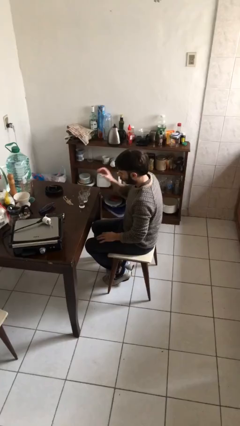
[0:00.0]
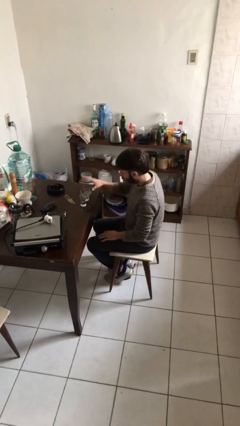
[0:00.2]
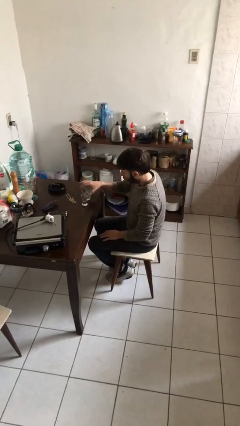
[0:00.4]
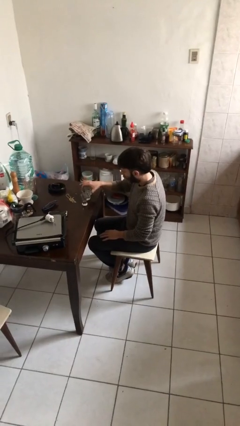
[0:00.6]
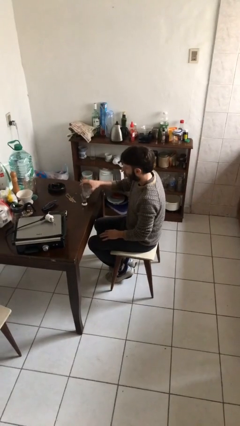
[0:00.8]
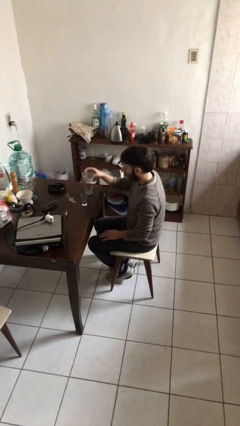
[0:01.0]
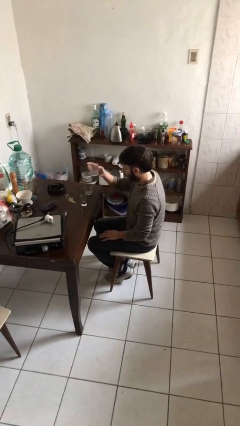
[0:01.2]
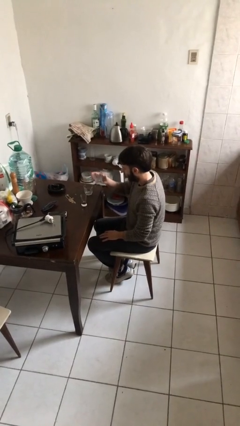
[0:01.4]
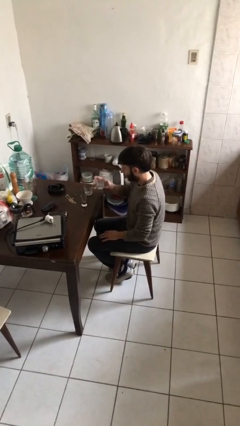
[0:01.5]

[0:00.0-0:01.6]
person picks up object from table

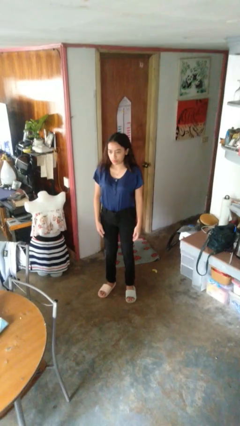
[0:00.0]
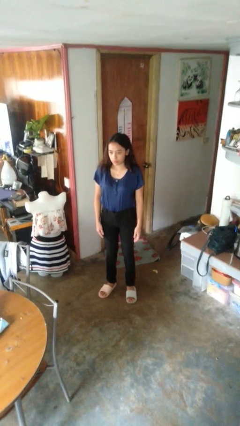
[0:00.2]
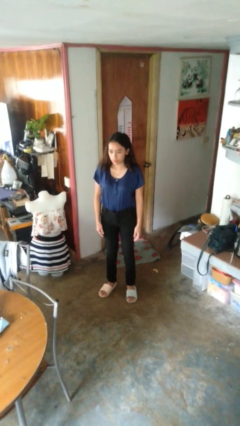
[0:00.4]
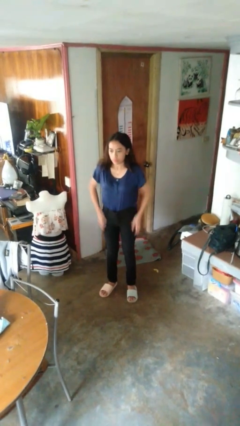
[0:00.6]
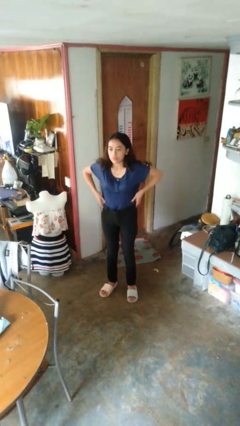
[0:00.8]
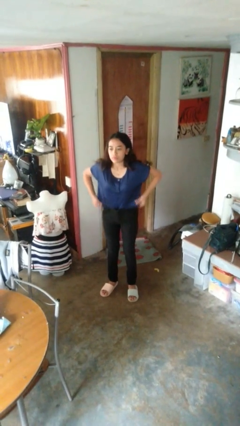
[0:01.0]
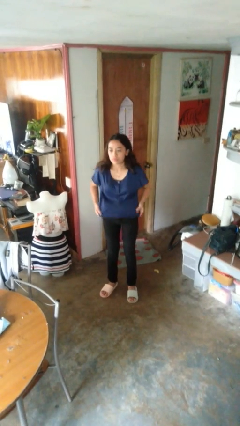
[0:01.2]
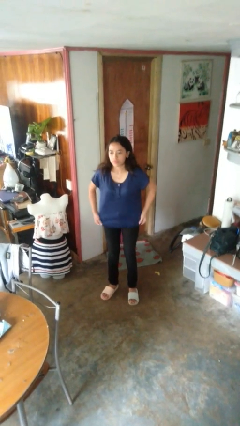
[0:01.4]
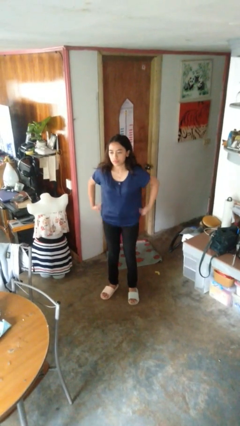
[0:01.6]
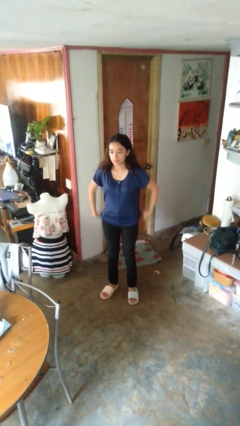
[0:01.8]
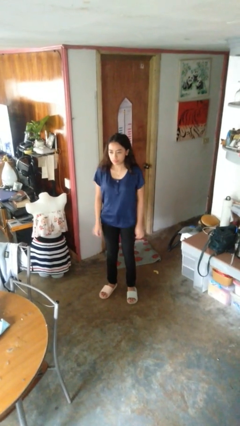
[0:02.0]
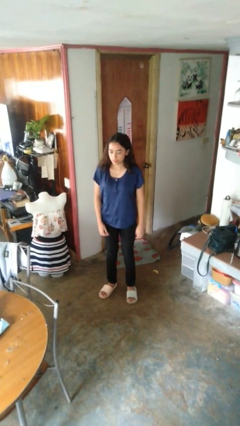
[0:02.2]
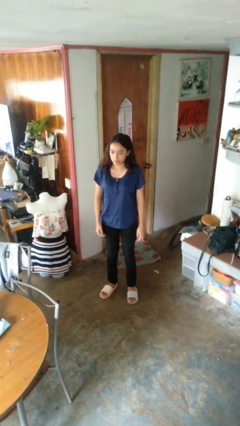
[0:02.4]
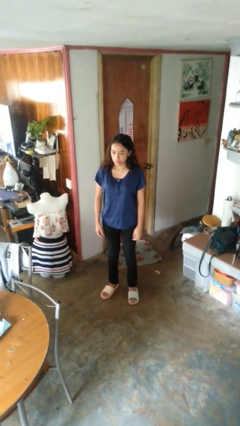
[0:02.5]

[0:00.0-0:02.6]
person untucks shirt

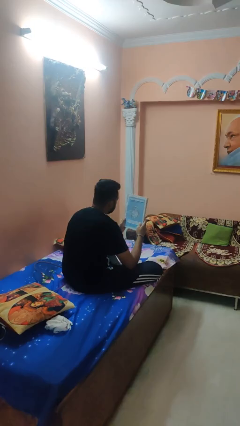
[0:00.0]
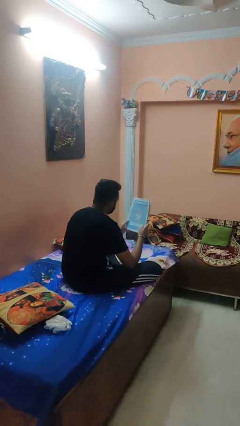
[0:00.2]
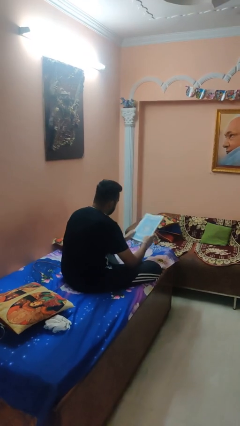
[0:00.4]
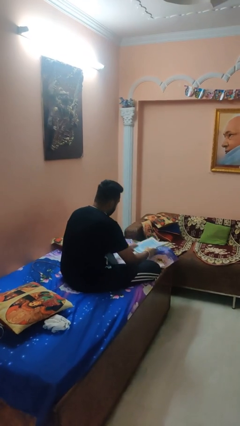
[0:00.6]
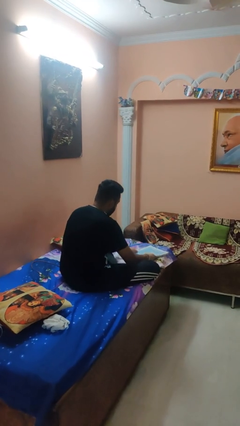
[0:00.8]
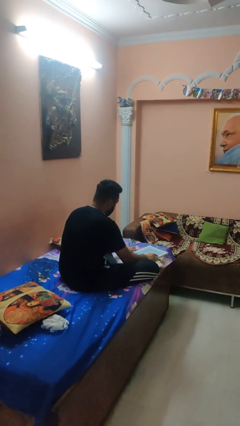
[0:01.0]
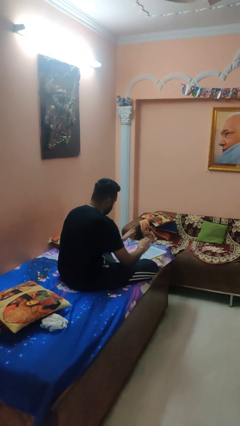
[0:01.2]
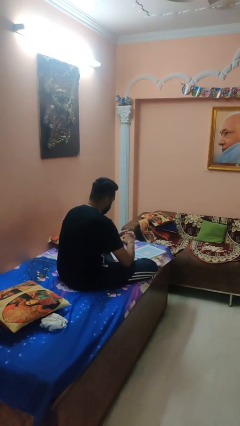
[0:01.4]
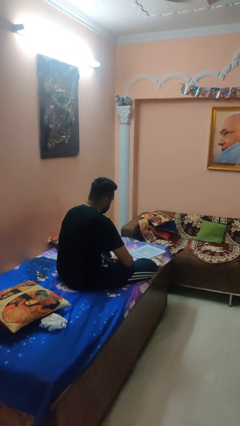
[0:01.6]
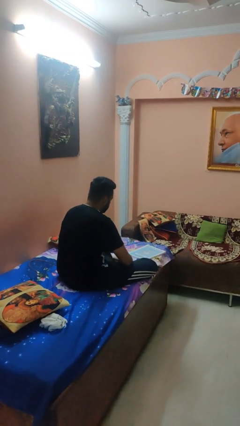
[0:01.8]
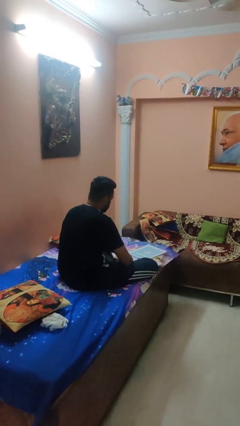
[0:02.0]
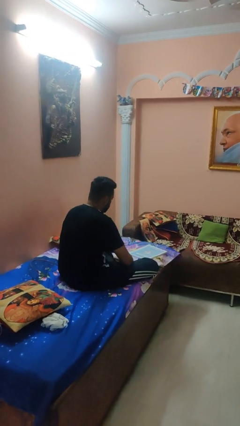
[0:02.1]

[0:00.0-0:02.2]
person puts down object on bed

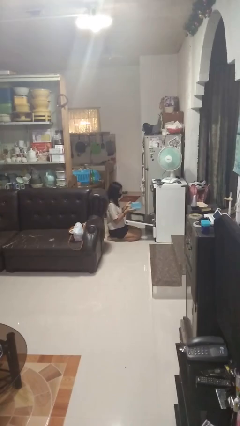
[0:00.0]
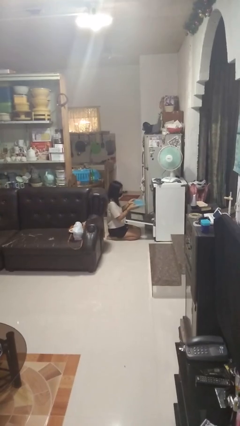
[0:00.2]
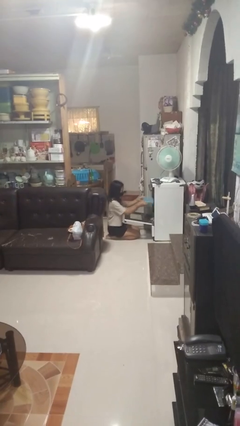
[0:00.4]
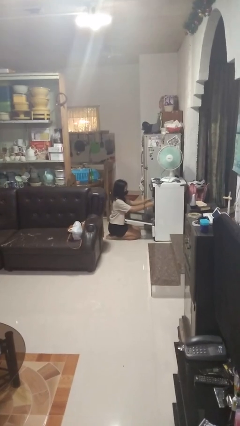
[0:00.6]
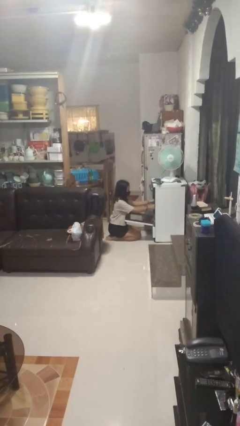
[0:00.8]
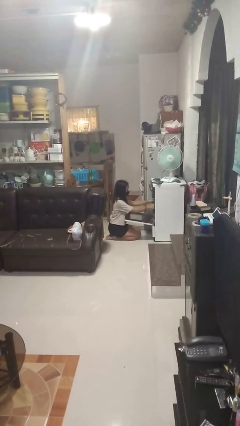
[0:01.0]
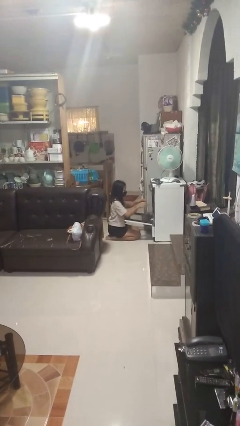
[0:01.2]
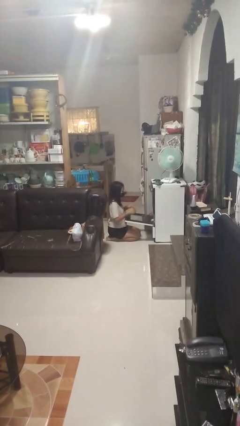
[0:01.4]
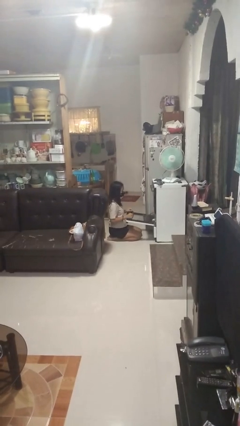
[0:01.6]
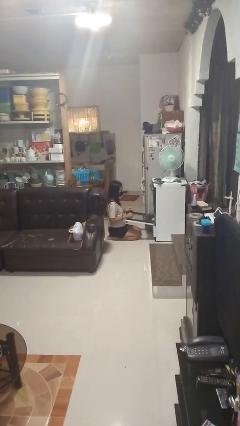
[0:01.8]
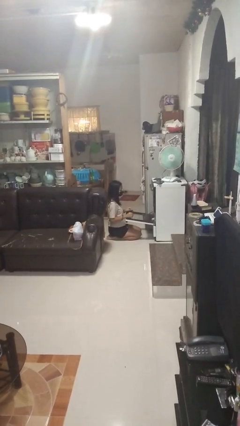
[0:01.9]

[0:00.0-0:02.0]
person puts object into oven

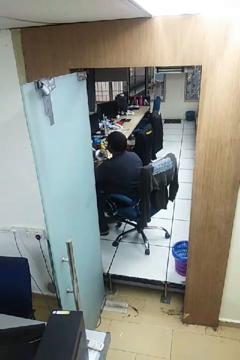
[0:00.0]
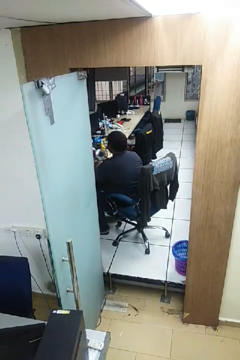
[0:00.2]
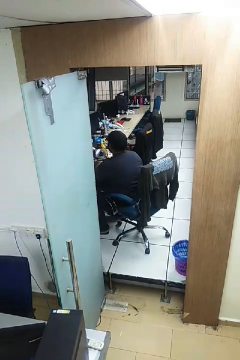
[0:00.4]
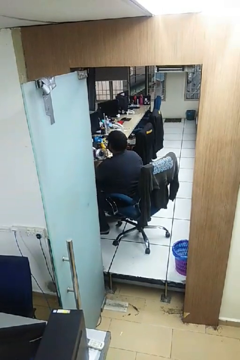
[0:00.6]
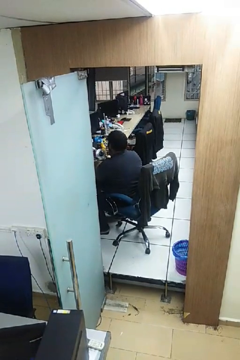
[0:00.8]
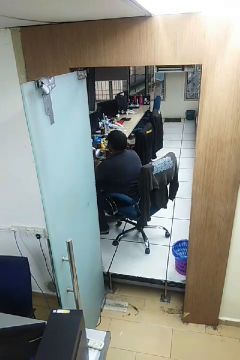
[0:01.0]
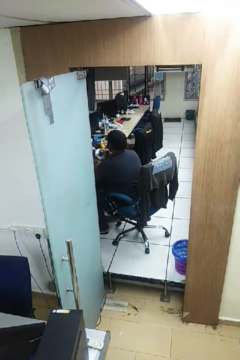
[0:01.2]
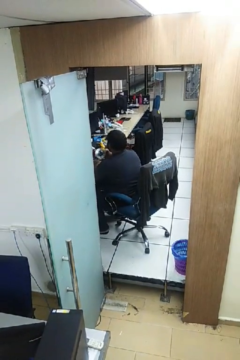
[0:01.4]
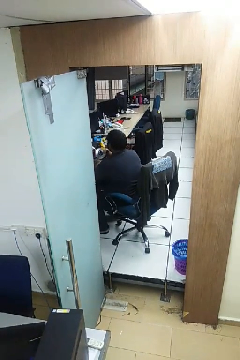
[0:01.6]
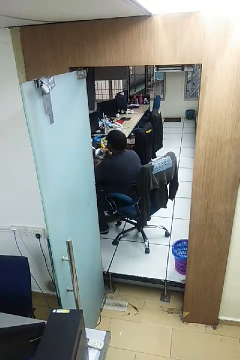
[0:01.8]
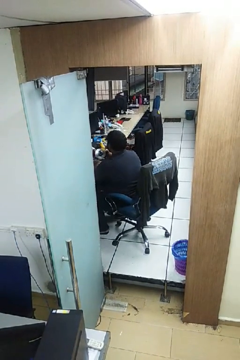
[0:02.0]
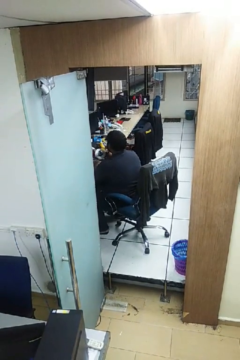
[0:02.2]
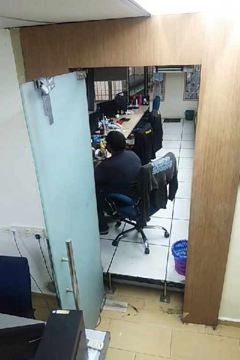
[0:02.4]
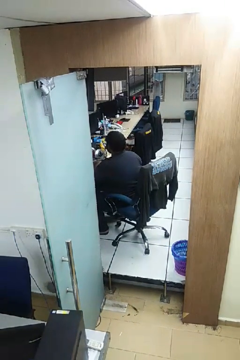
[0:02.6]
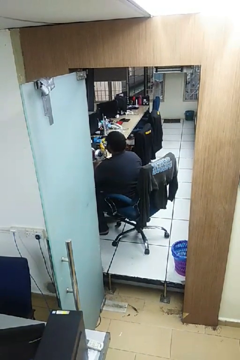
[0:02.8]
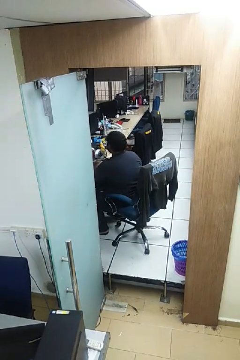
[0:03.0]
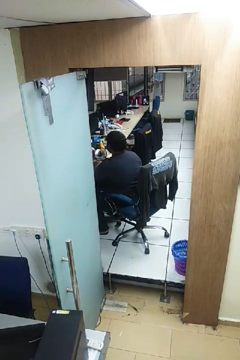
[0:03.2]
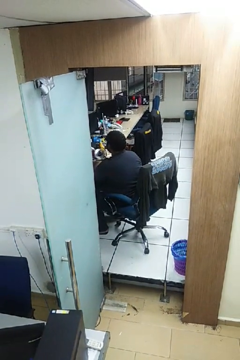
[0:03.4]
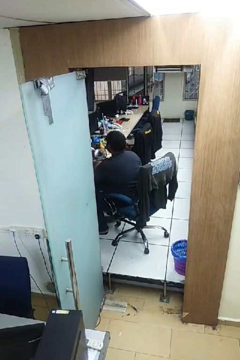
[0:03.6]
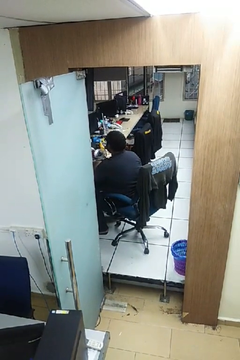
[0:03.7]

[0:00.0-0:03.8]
person turns off fan

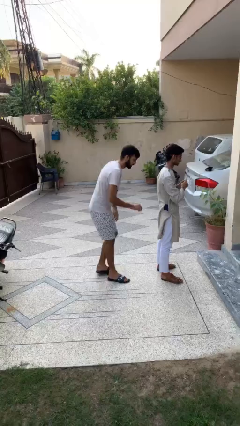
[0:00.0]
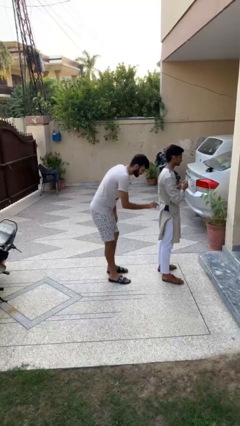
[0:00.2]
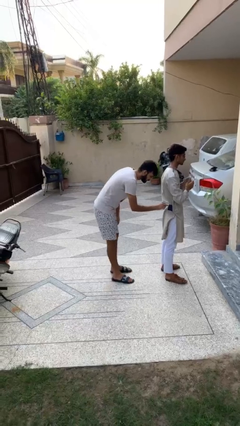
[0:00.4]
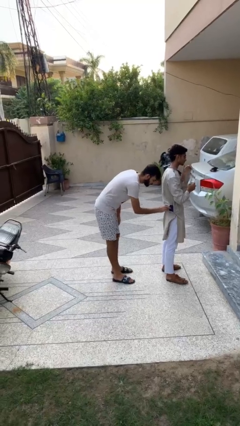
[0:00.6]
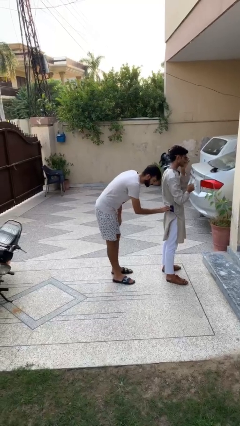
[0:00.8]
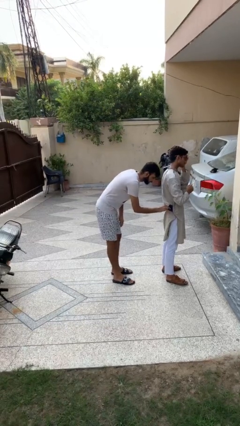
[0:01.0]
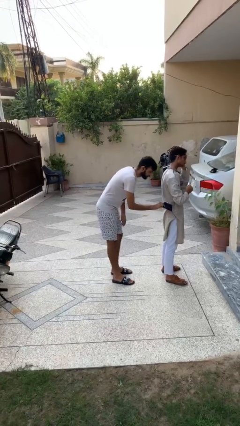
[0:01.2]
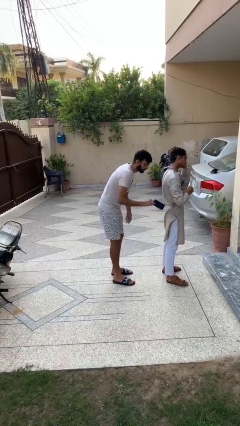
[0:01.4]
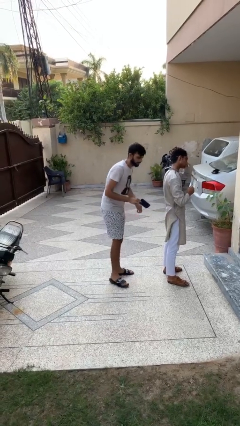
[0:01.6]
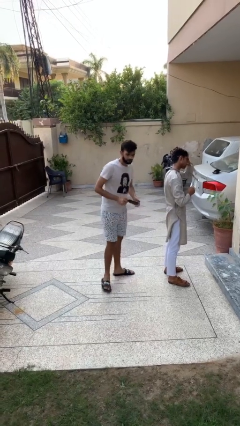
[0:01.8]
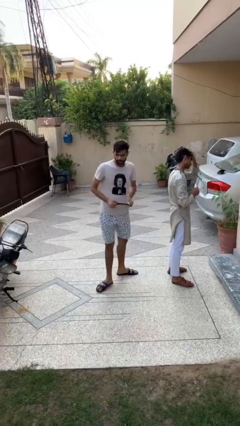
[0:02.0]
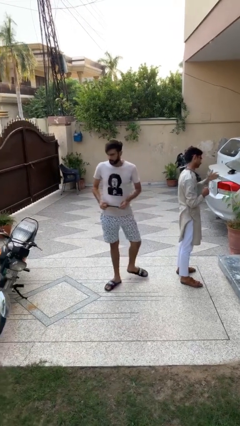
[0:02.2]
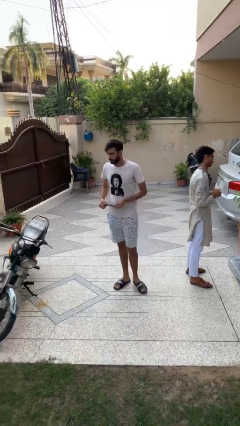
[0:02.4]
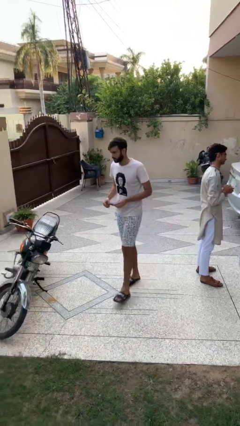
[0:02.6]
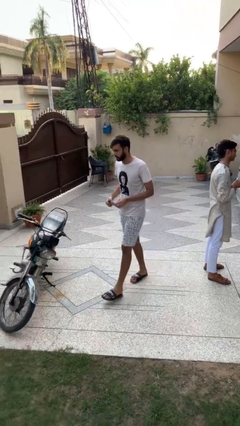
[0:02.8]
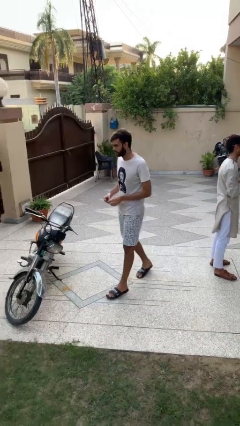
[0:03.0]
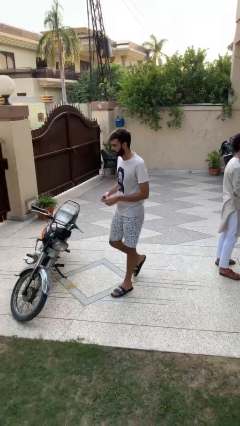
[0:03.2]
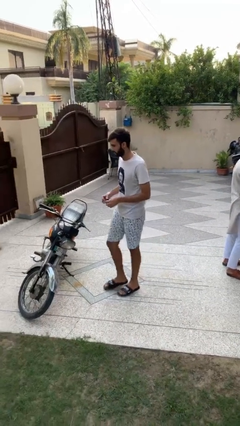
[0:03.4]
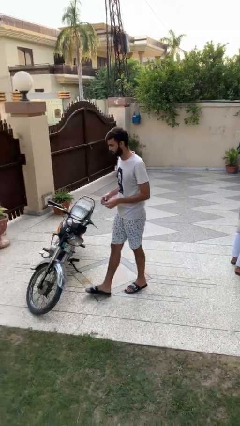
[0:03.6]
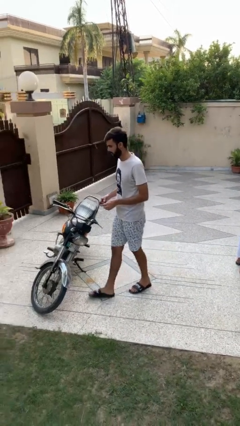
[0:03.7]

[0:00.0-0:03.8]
person steals object from person

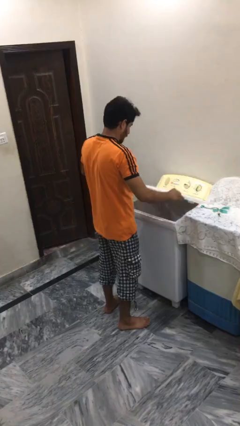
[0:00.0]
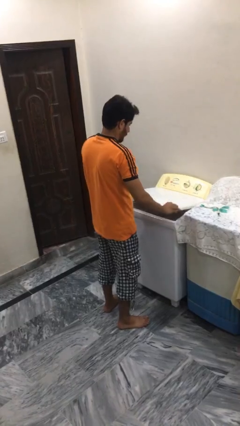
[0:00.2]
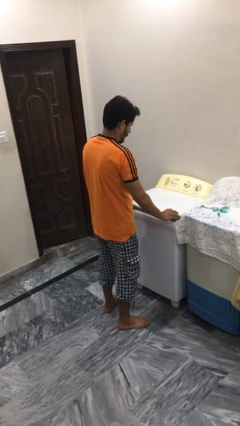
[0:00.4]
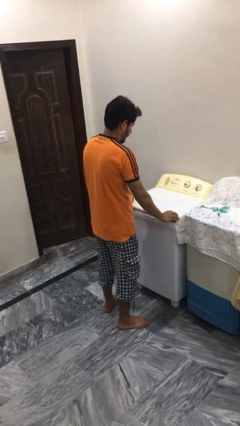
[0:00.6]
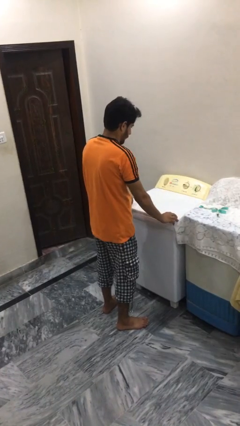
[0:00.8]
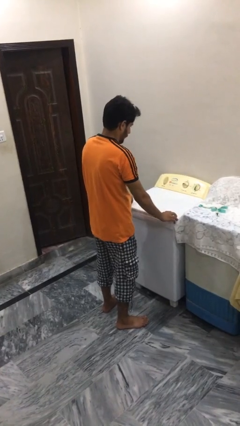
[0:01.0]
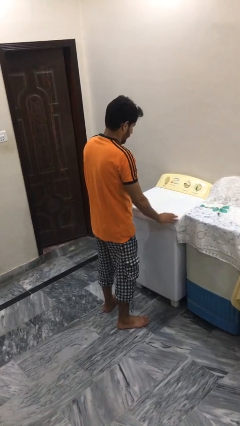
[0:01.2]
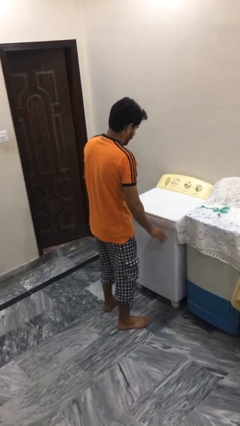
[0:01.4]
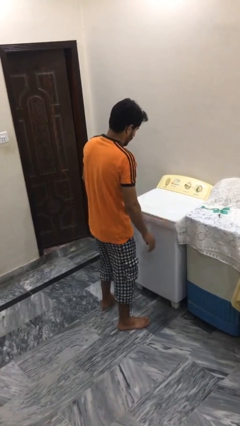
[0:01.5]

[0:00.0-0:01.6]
person closes clothes washer

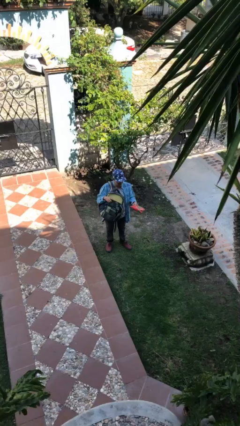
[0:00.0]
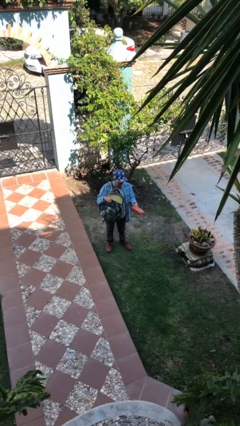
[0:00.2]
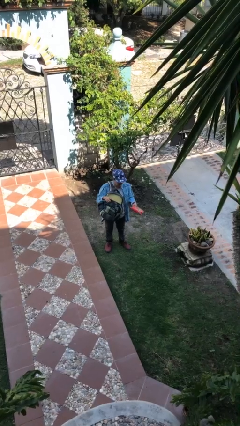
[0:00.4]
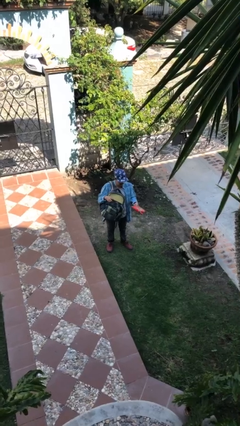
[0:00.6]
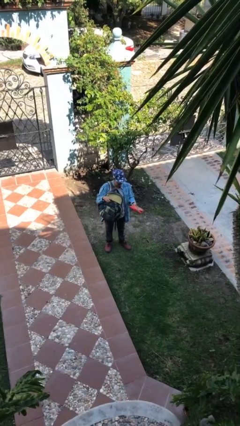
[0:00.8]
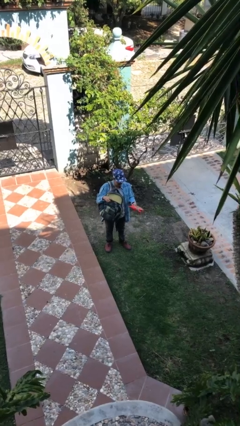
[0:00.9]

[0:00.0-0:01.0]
person takes object from backpack
